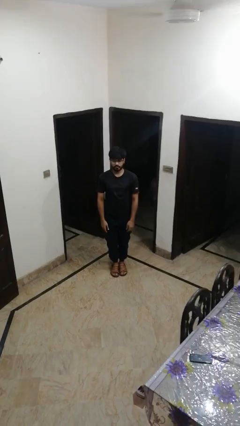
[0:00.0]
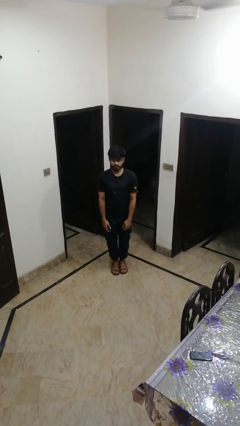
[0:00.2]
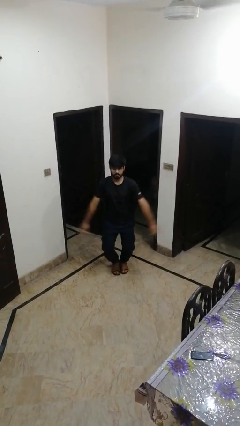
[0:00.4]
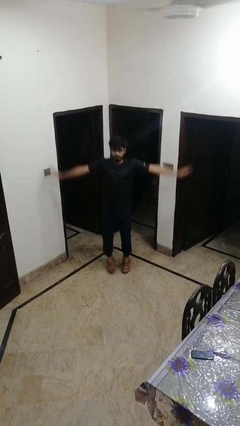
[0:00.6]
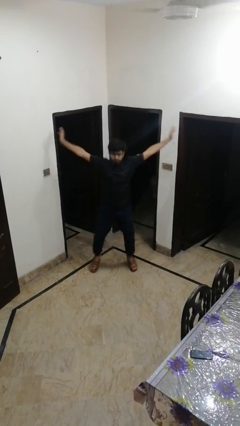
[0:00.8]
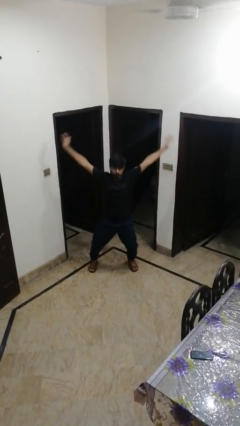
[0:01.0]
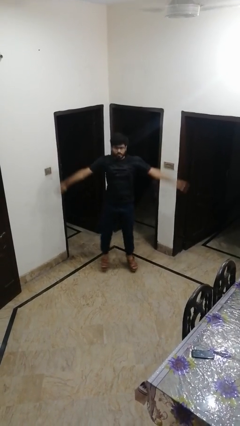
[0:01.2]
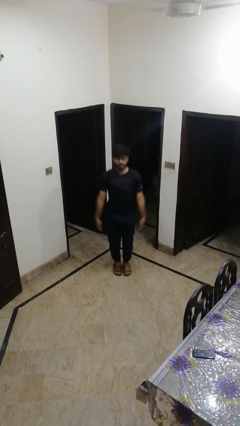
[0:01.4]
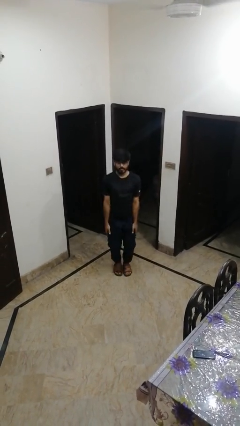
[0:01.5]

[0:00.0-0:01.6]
person exercises with jumping jacks

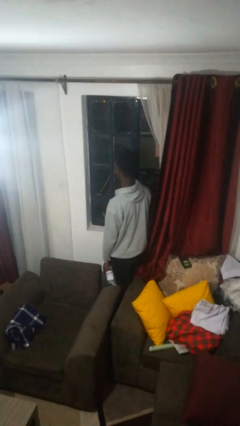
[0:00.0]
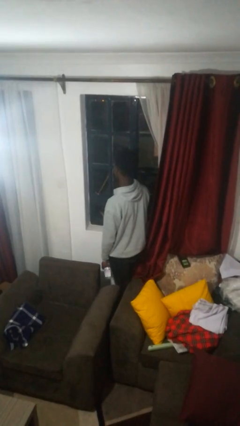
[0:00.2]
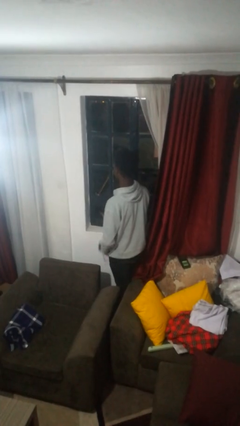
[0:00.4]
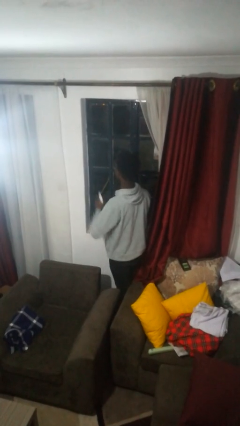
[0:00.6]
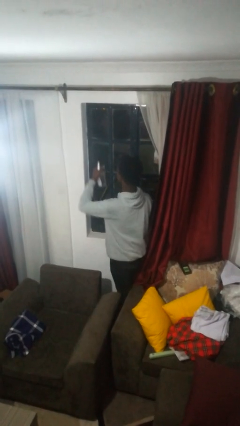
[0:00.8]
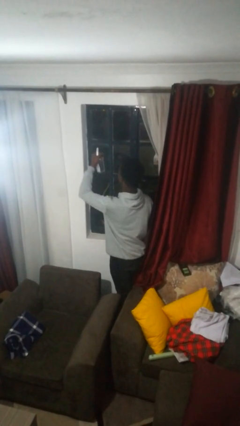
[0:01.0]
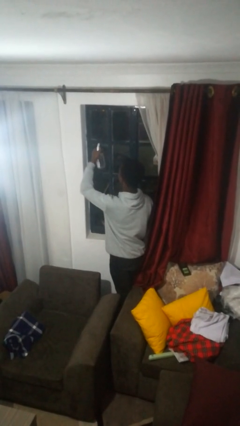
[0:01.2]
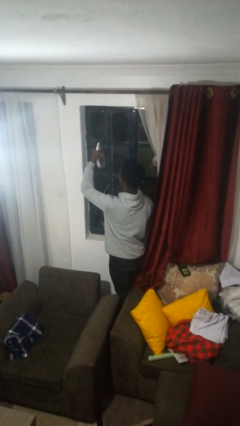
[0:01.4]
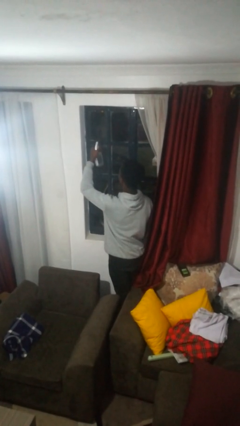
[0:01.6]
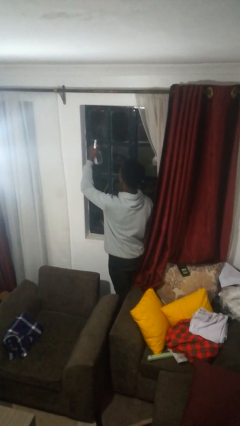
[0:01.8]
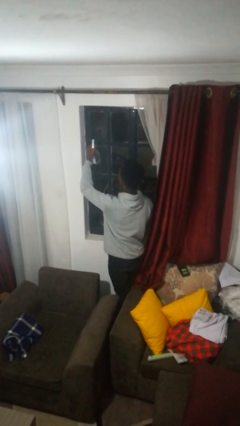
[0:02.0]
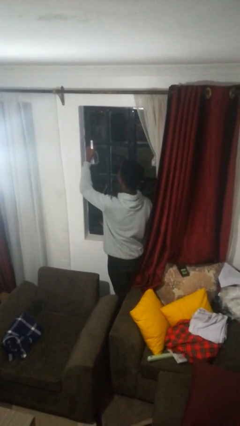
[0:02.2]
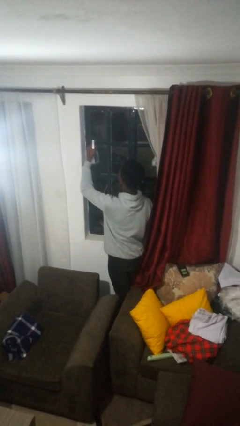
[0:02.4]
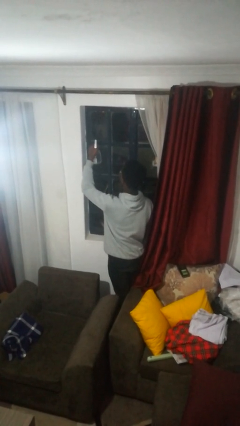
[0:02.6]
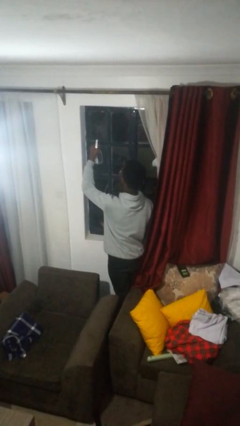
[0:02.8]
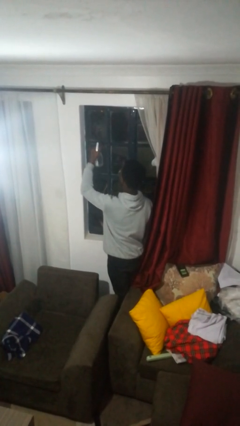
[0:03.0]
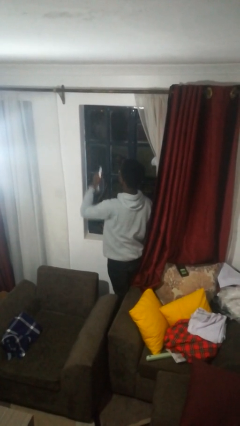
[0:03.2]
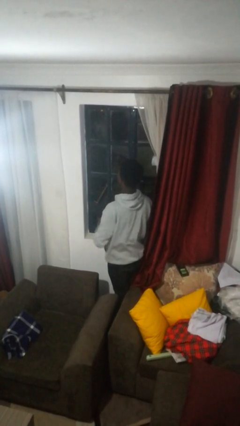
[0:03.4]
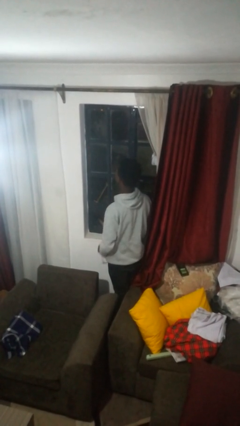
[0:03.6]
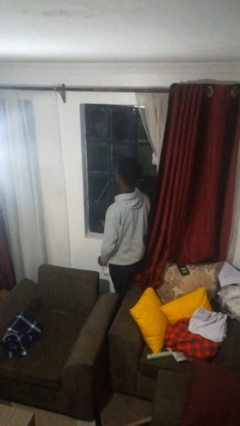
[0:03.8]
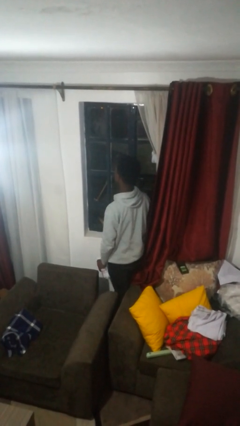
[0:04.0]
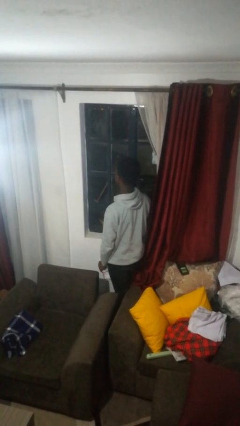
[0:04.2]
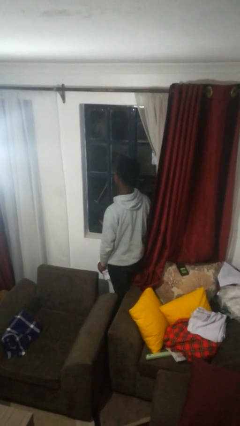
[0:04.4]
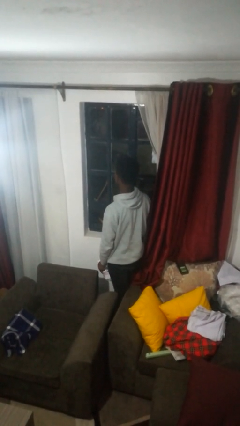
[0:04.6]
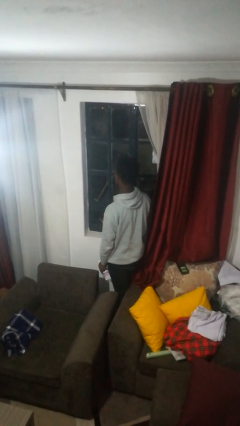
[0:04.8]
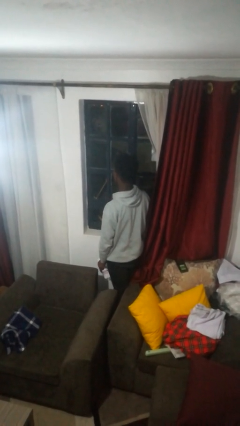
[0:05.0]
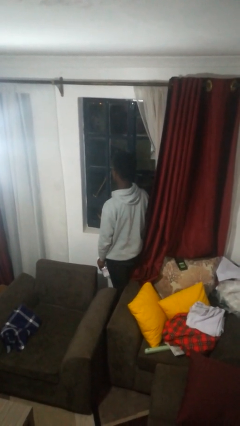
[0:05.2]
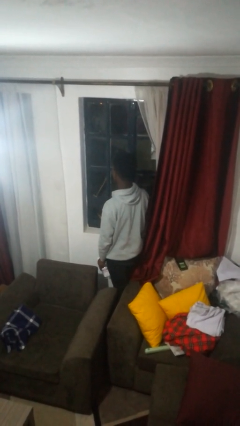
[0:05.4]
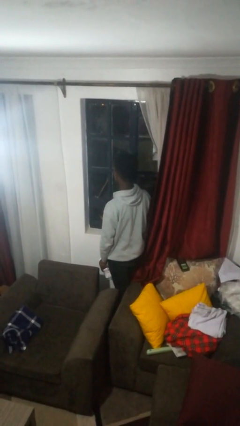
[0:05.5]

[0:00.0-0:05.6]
person sprays from bottle

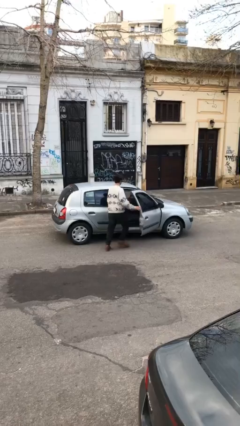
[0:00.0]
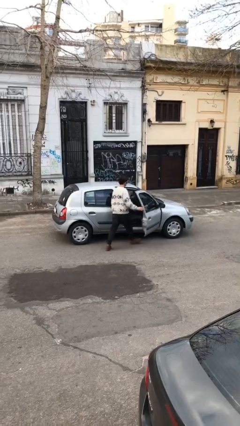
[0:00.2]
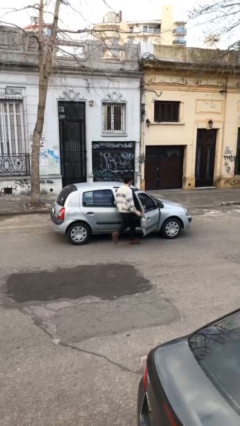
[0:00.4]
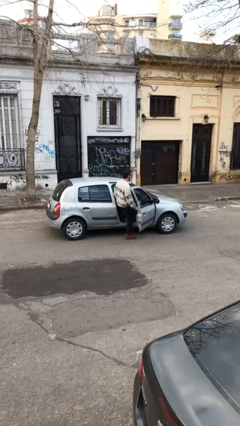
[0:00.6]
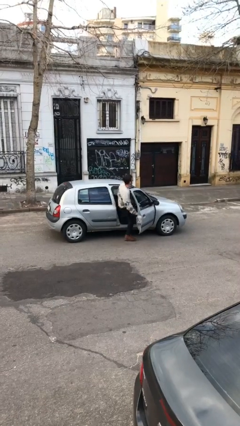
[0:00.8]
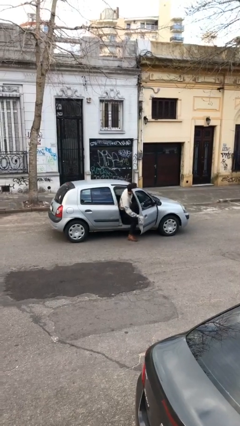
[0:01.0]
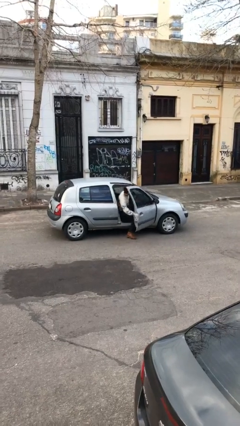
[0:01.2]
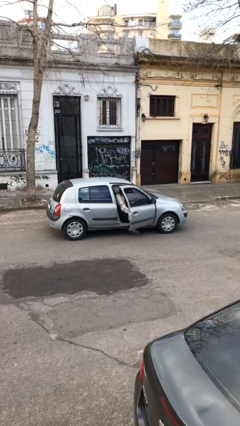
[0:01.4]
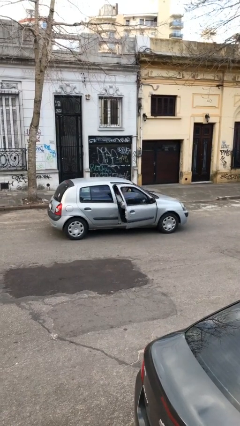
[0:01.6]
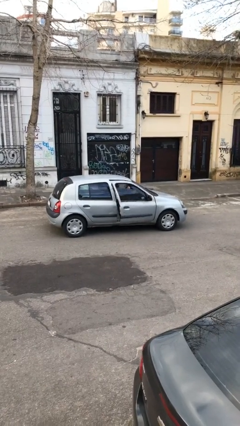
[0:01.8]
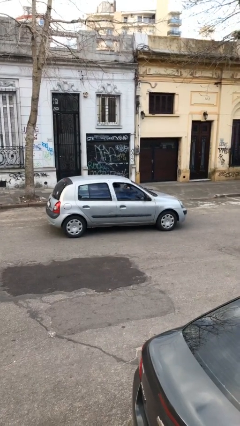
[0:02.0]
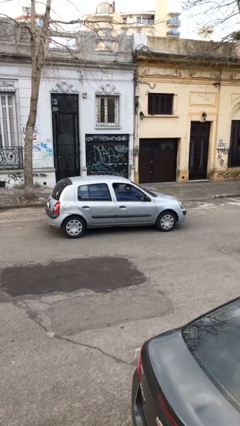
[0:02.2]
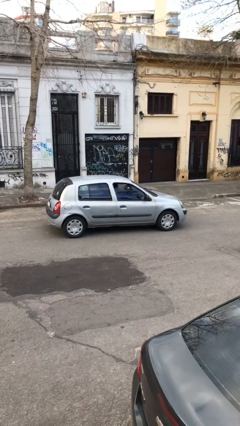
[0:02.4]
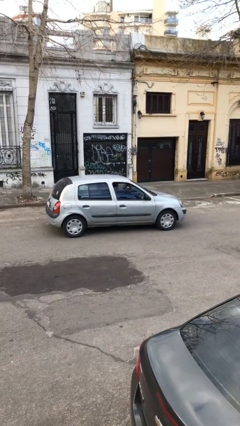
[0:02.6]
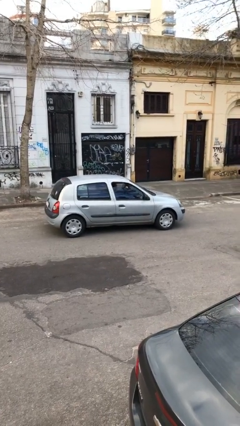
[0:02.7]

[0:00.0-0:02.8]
car picks up person

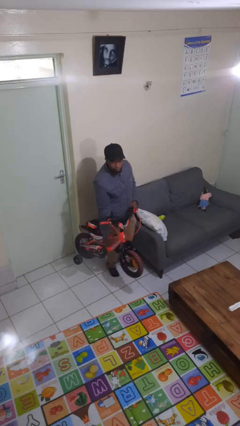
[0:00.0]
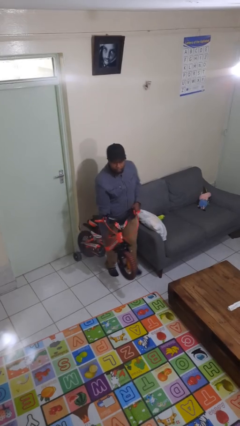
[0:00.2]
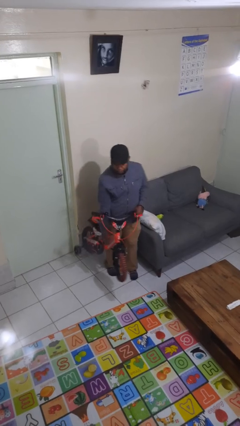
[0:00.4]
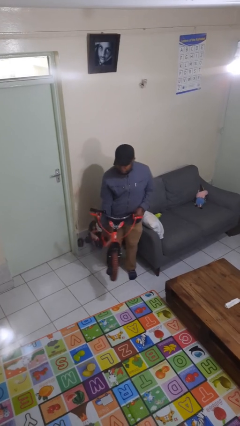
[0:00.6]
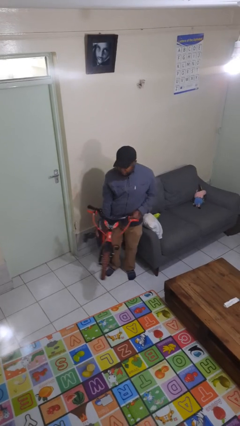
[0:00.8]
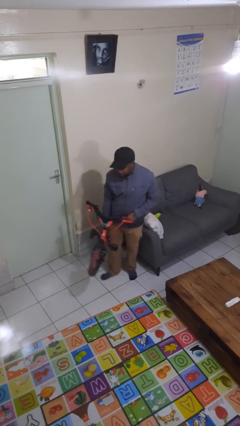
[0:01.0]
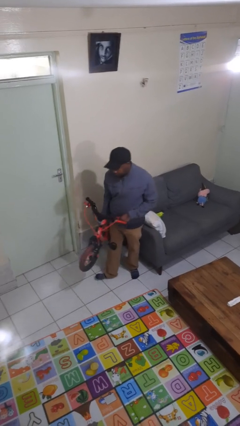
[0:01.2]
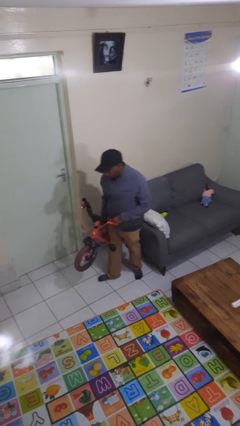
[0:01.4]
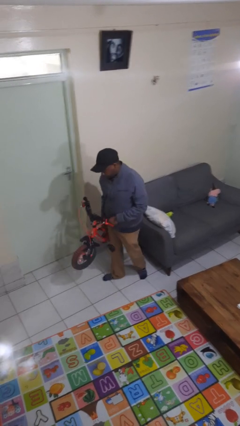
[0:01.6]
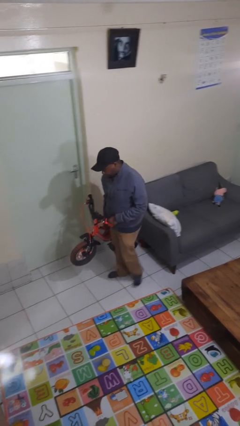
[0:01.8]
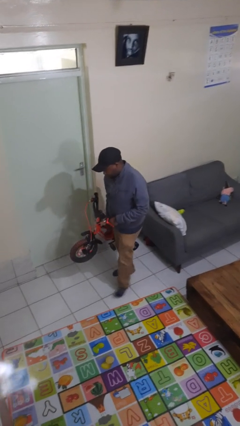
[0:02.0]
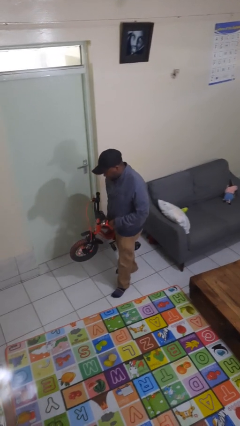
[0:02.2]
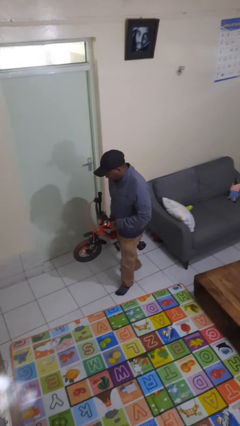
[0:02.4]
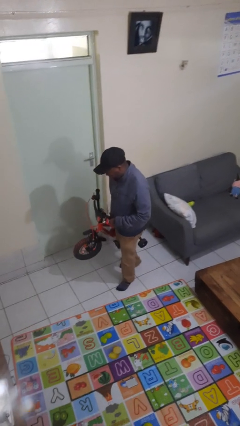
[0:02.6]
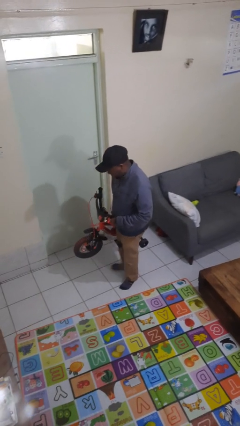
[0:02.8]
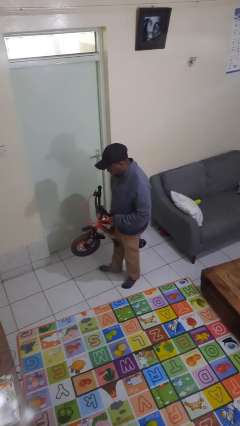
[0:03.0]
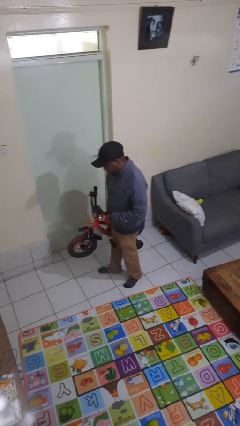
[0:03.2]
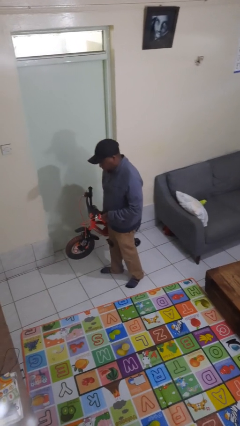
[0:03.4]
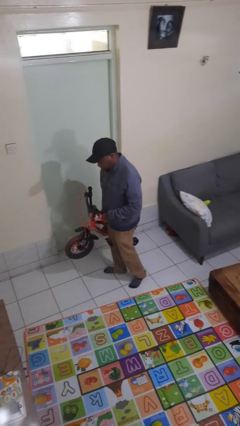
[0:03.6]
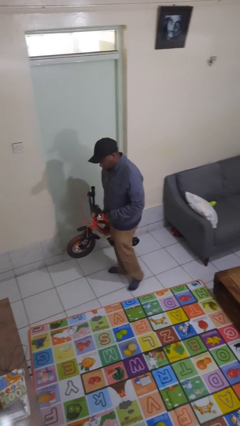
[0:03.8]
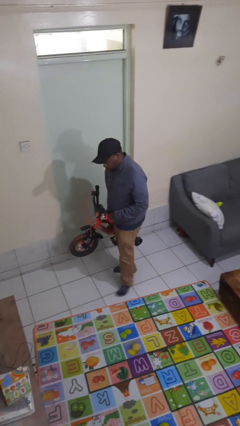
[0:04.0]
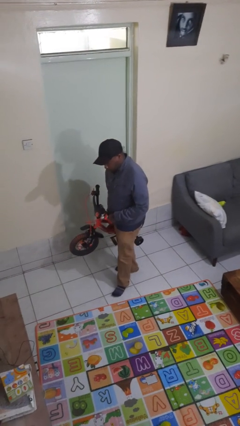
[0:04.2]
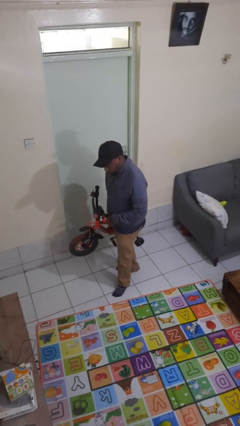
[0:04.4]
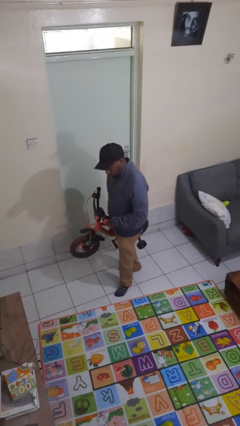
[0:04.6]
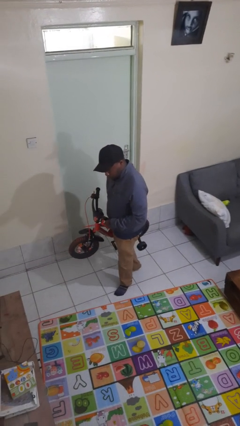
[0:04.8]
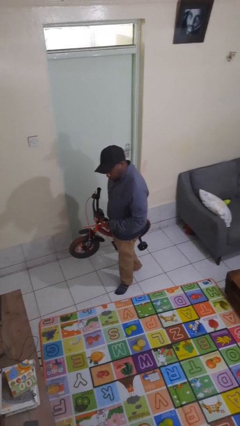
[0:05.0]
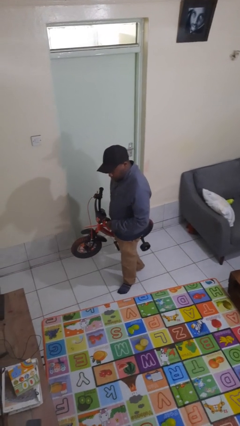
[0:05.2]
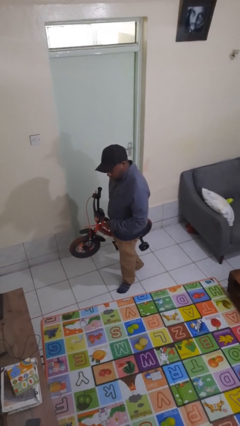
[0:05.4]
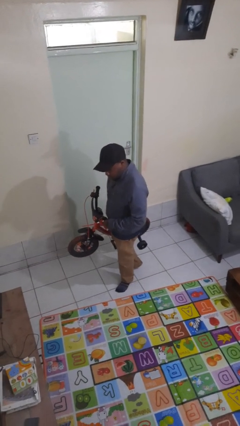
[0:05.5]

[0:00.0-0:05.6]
person carries bicycle

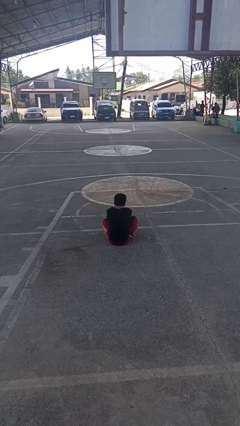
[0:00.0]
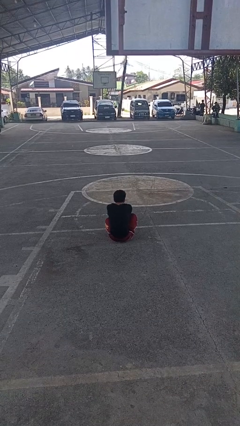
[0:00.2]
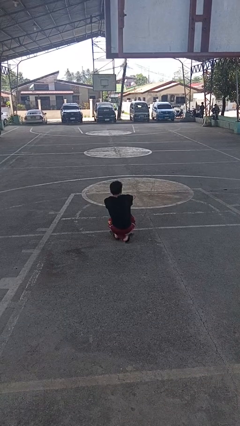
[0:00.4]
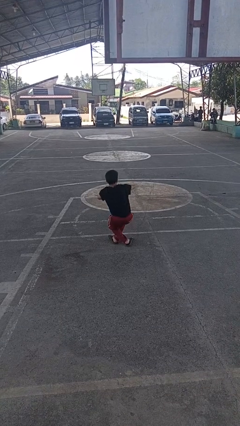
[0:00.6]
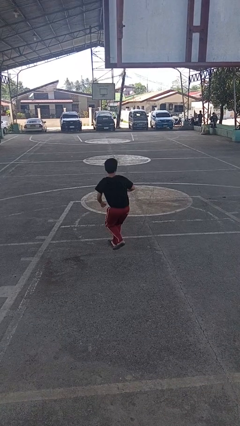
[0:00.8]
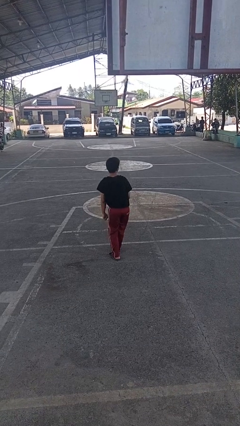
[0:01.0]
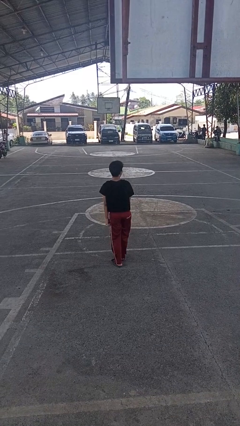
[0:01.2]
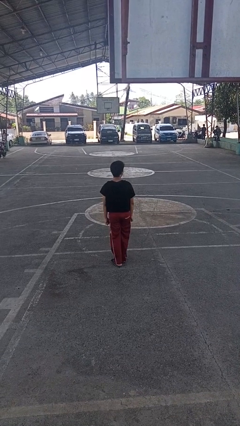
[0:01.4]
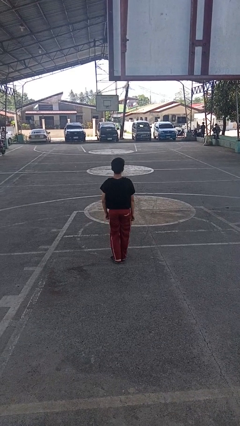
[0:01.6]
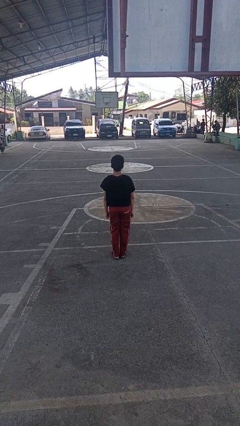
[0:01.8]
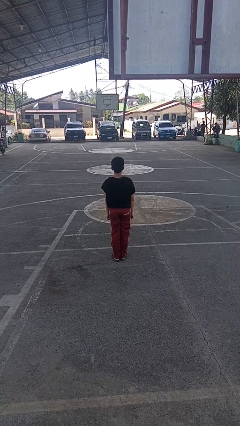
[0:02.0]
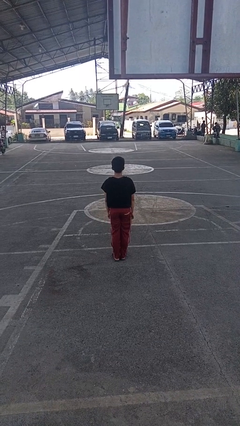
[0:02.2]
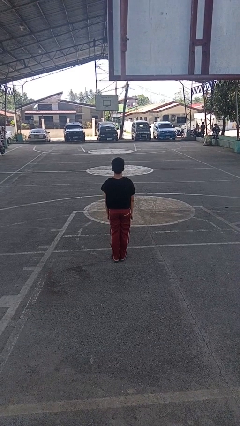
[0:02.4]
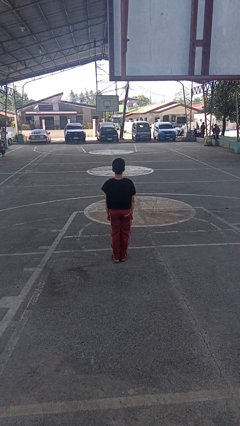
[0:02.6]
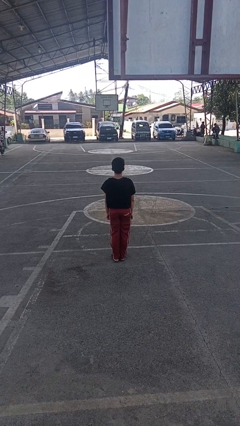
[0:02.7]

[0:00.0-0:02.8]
person stands up from floor
